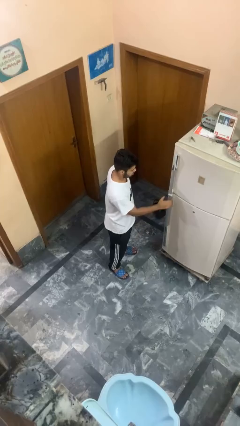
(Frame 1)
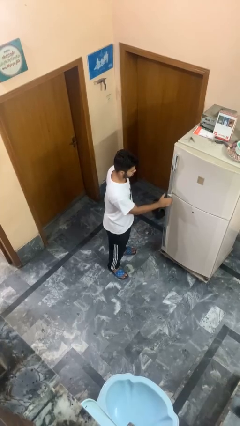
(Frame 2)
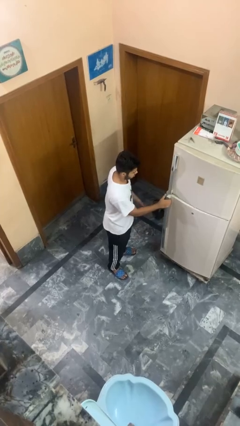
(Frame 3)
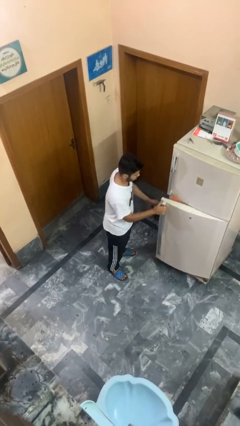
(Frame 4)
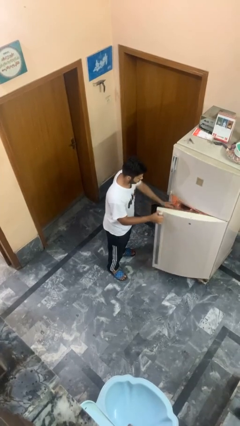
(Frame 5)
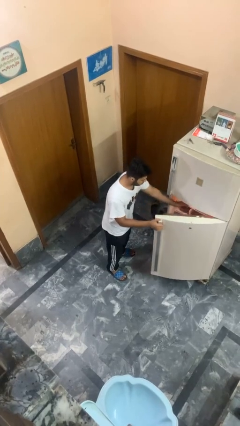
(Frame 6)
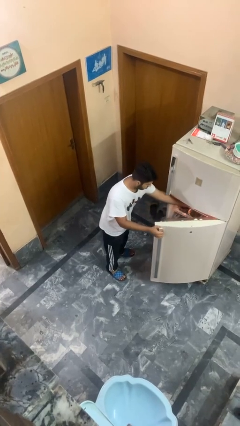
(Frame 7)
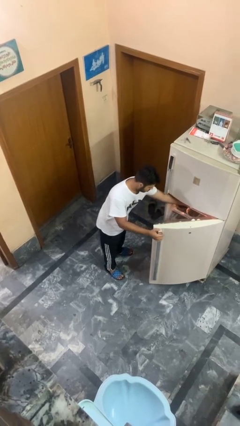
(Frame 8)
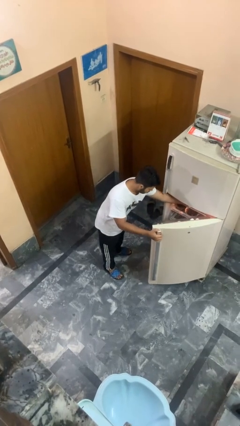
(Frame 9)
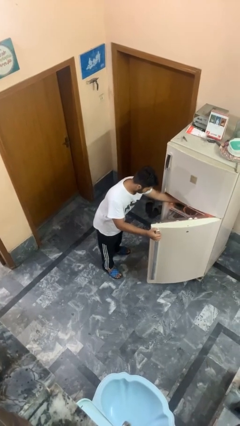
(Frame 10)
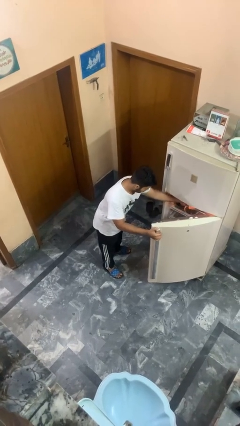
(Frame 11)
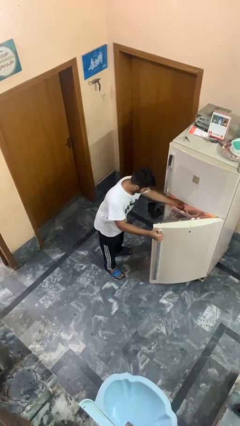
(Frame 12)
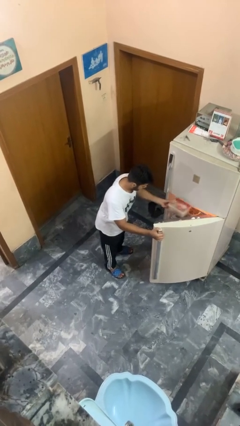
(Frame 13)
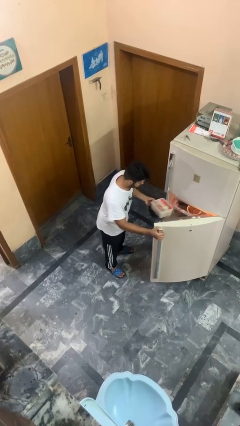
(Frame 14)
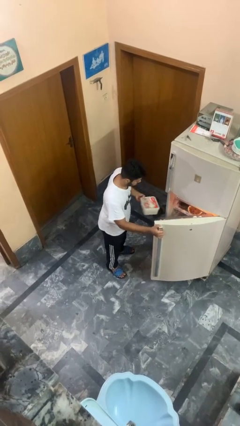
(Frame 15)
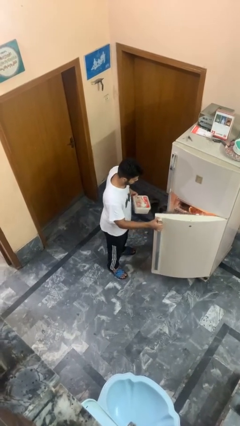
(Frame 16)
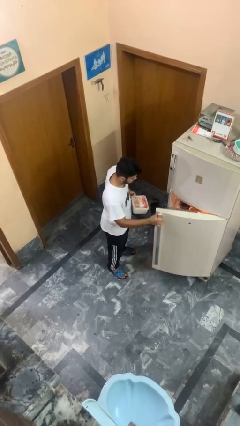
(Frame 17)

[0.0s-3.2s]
person takes object from refrigerator

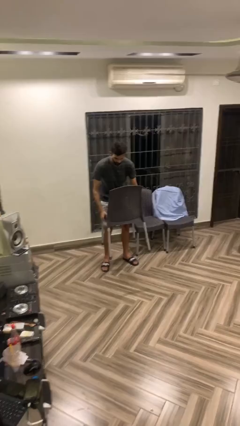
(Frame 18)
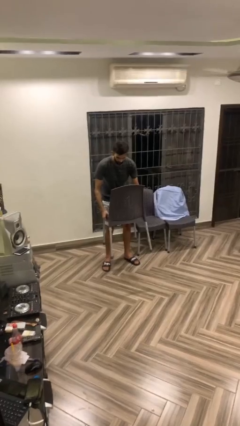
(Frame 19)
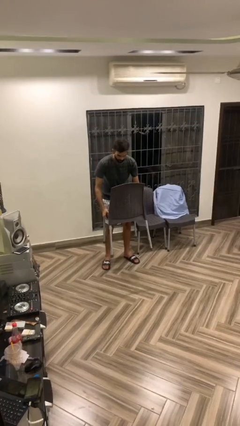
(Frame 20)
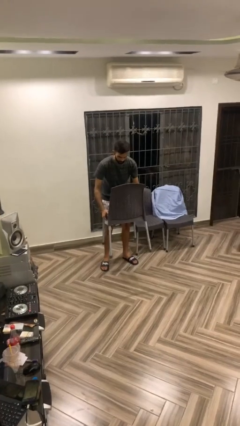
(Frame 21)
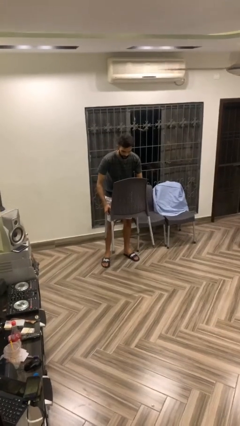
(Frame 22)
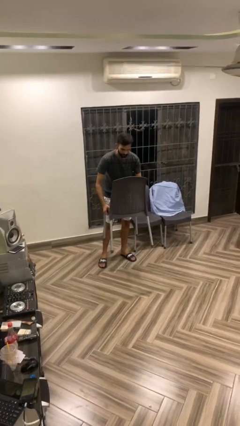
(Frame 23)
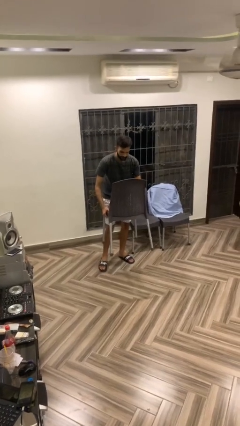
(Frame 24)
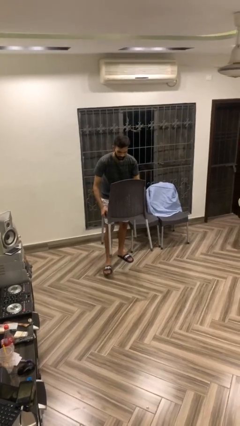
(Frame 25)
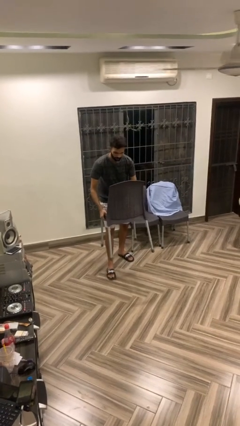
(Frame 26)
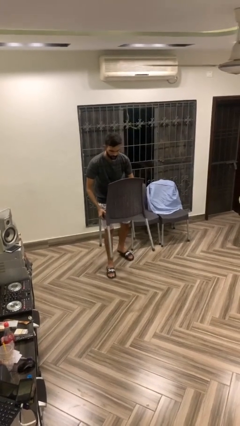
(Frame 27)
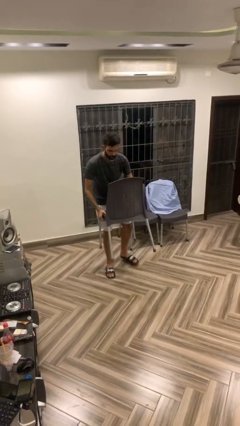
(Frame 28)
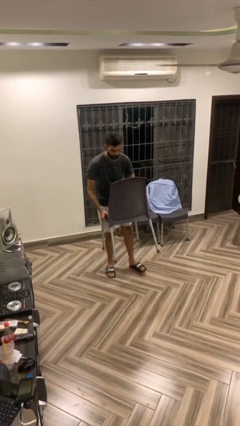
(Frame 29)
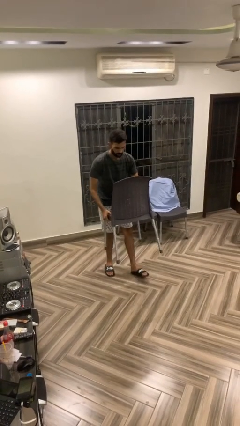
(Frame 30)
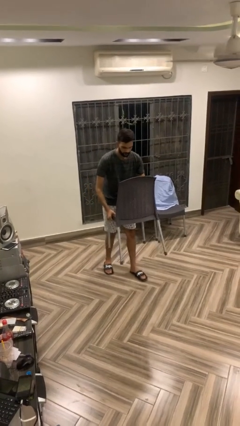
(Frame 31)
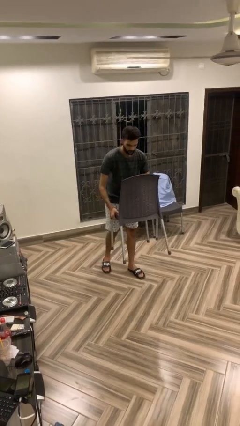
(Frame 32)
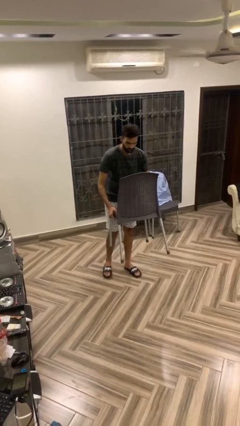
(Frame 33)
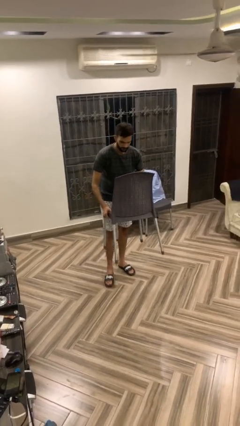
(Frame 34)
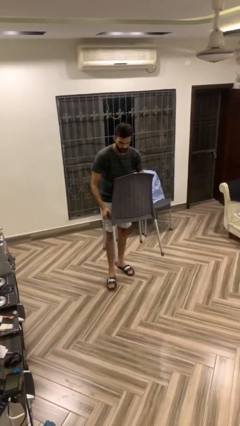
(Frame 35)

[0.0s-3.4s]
person carries heavy object

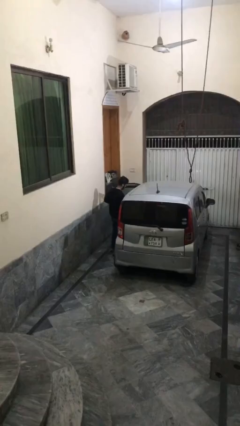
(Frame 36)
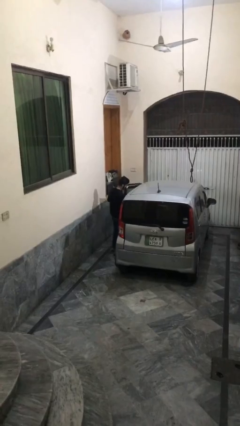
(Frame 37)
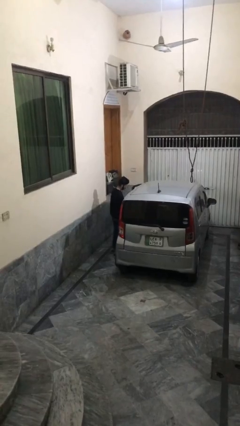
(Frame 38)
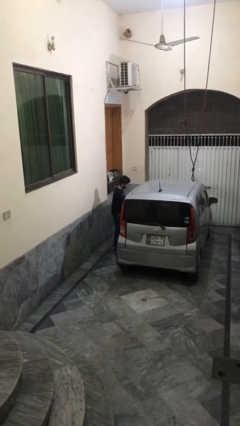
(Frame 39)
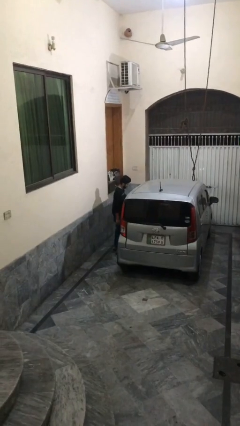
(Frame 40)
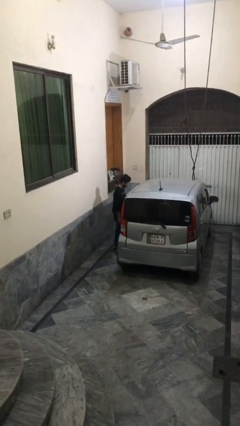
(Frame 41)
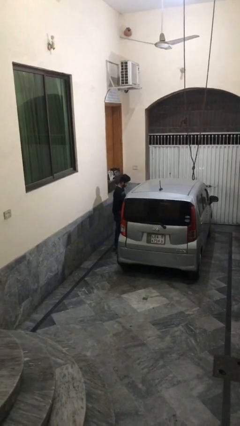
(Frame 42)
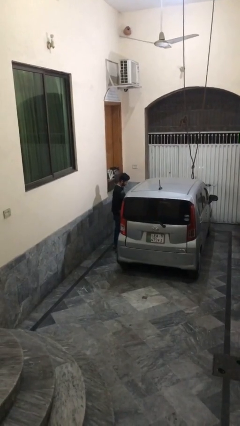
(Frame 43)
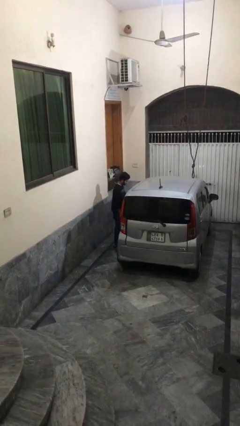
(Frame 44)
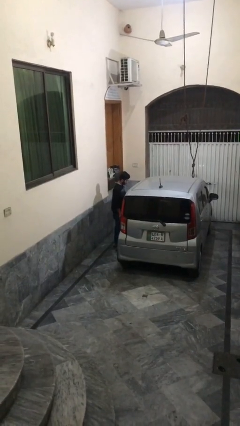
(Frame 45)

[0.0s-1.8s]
person closes car door

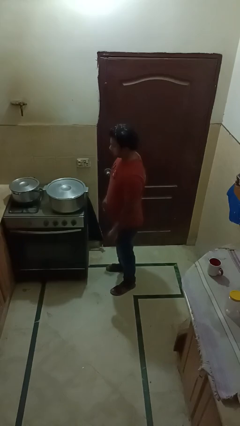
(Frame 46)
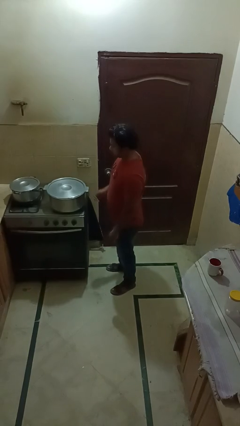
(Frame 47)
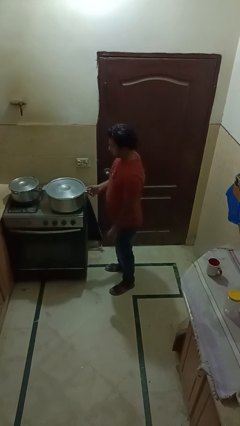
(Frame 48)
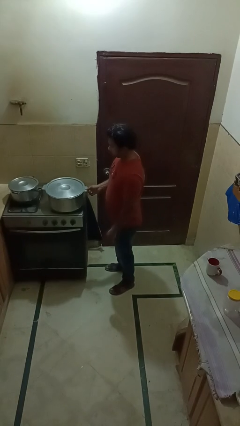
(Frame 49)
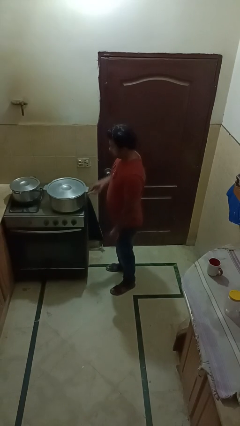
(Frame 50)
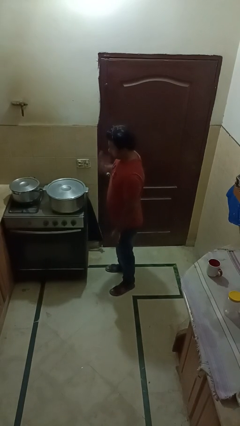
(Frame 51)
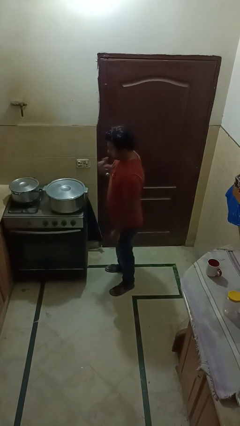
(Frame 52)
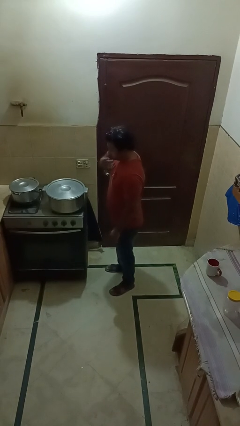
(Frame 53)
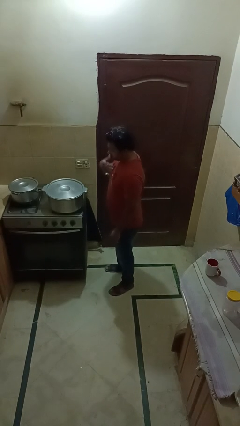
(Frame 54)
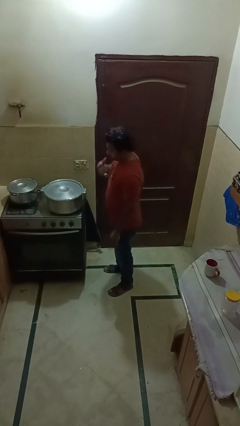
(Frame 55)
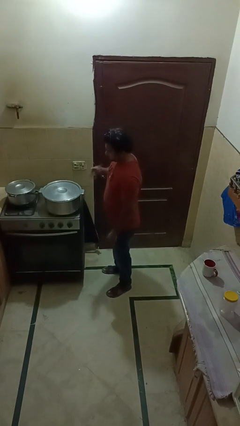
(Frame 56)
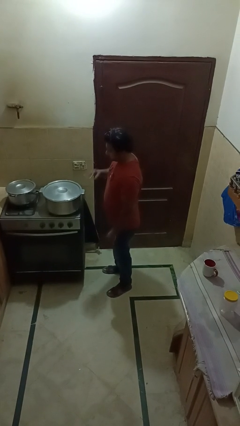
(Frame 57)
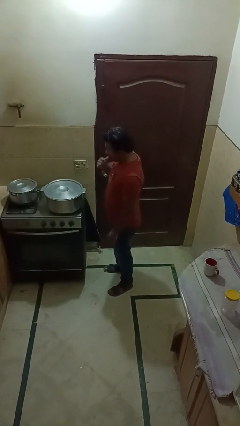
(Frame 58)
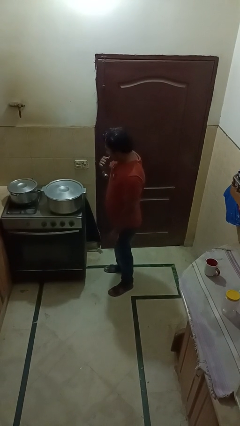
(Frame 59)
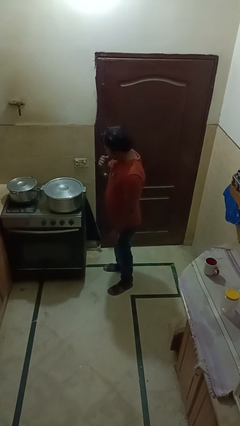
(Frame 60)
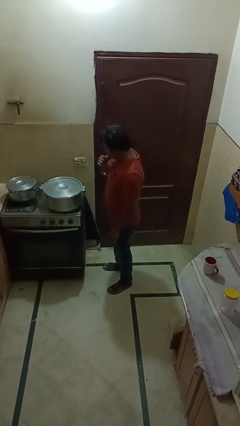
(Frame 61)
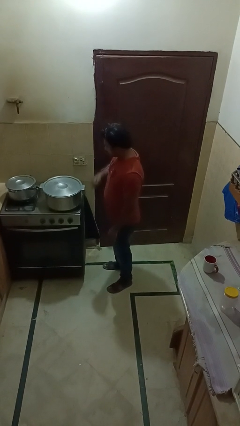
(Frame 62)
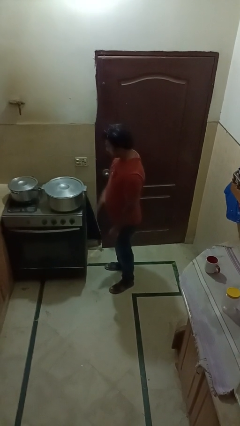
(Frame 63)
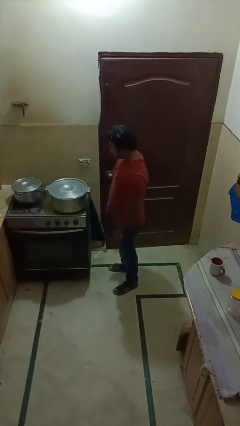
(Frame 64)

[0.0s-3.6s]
person burns hand

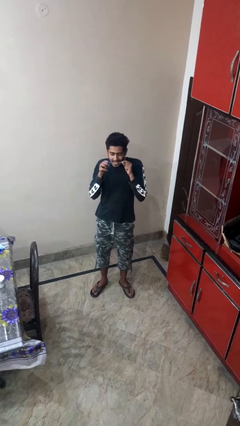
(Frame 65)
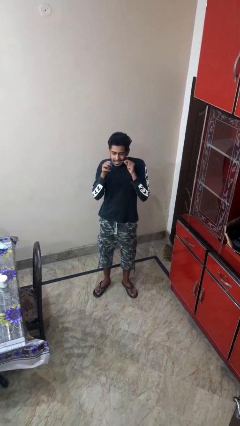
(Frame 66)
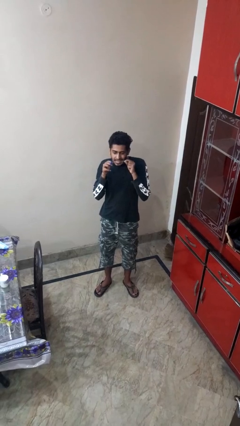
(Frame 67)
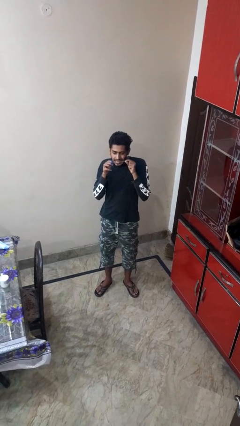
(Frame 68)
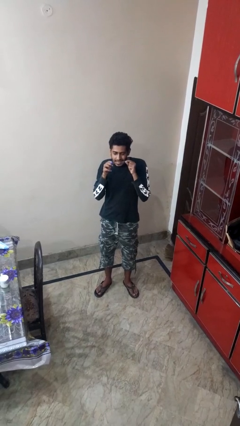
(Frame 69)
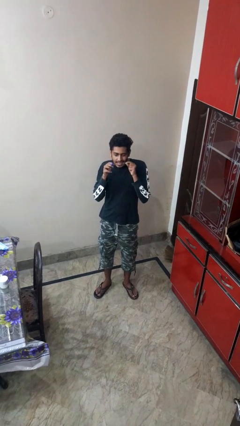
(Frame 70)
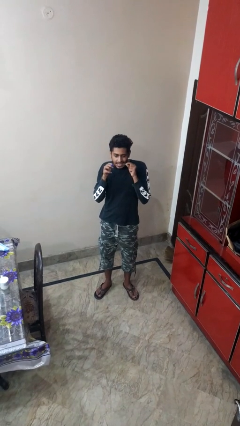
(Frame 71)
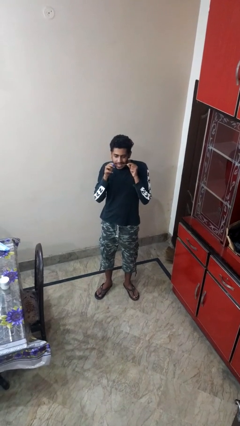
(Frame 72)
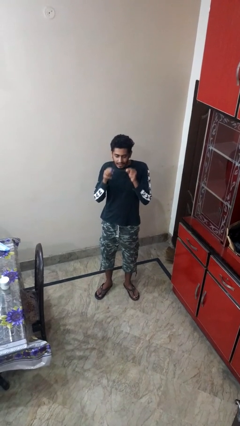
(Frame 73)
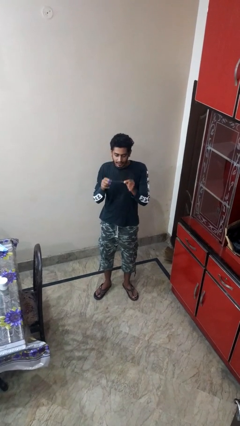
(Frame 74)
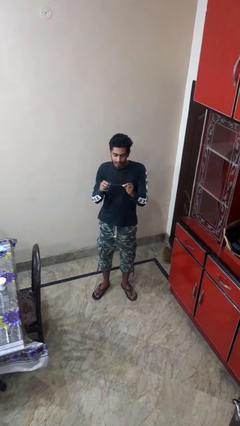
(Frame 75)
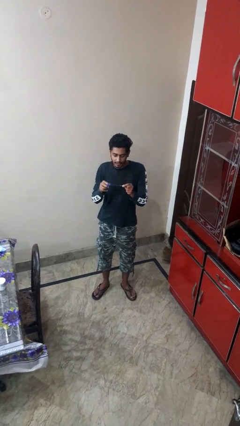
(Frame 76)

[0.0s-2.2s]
person flosses

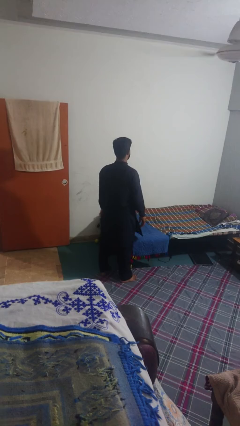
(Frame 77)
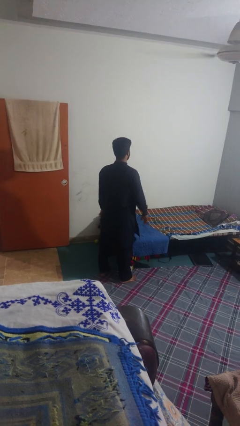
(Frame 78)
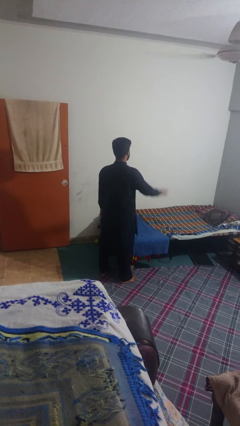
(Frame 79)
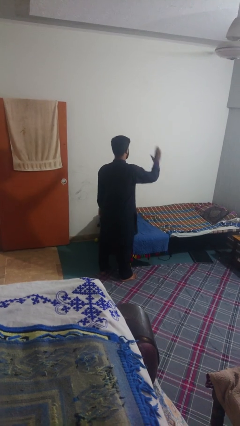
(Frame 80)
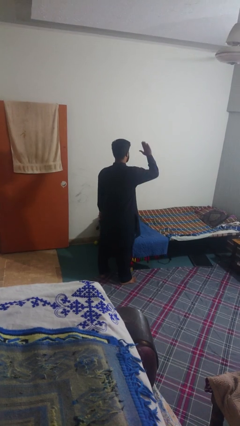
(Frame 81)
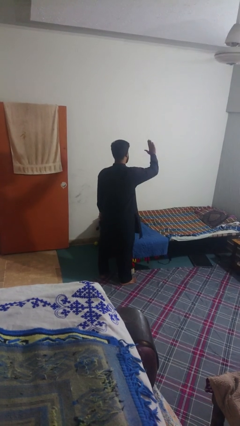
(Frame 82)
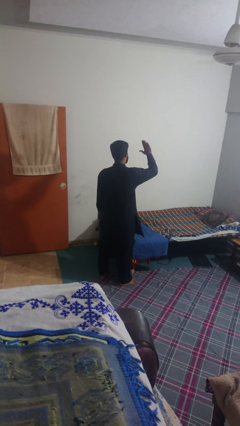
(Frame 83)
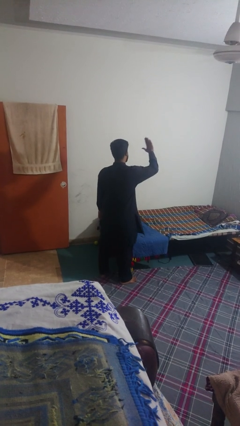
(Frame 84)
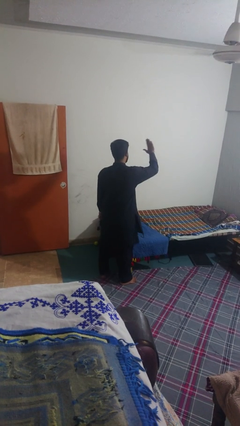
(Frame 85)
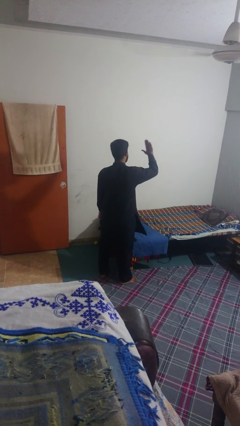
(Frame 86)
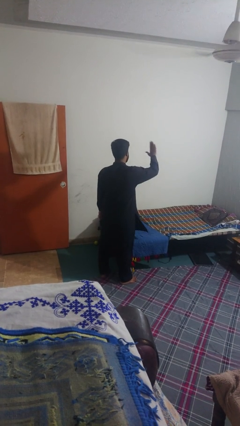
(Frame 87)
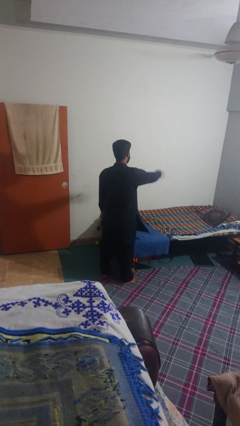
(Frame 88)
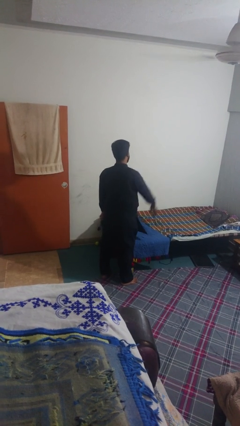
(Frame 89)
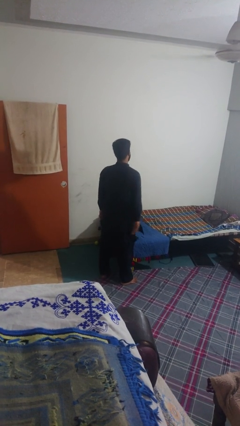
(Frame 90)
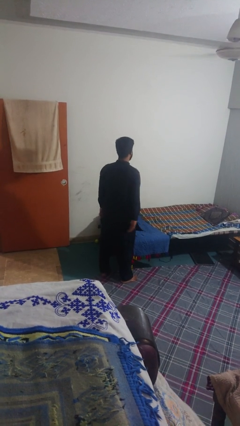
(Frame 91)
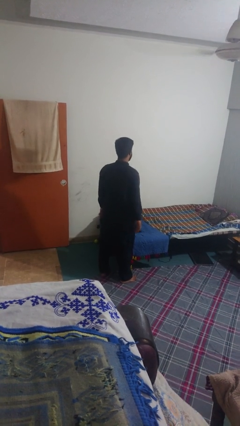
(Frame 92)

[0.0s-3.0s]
person gestures stop
